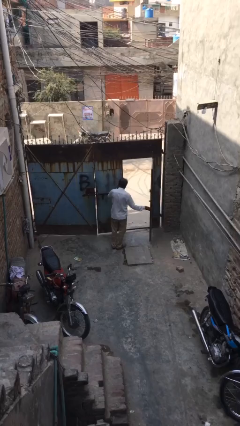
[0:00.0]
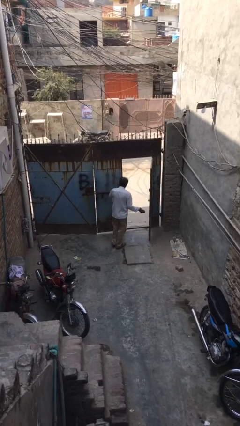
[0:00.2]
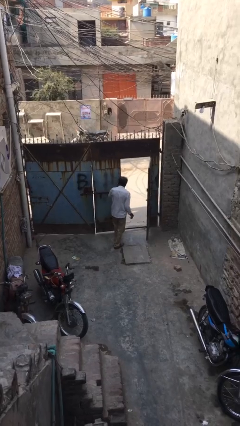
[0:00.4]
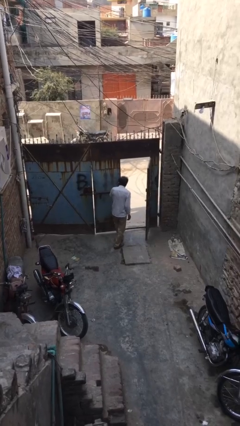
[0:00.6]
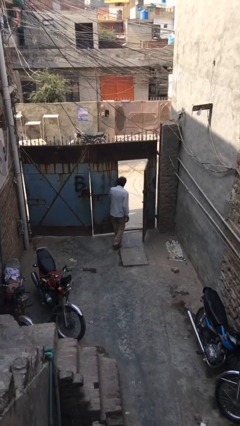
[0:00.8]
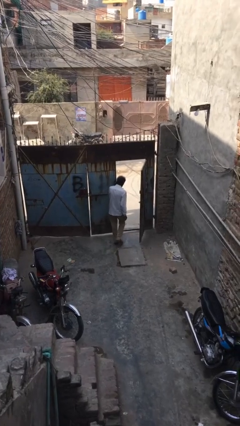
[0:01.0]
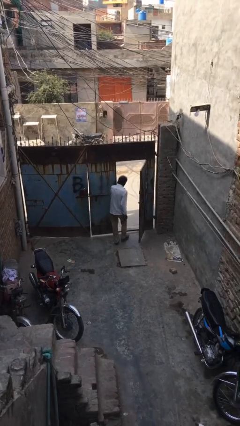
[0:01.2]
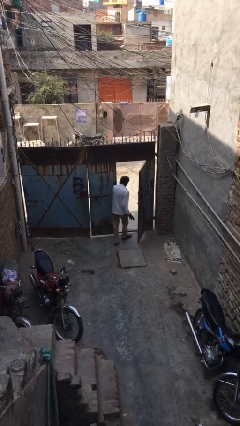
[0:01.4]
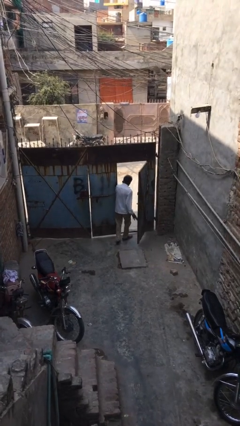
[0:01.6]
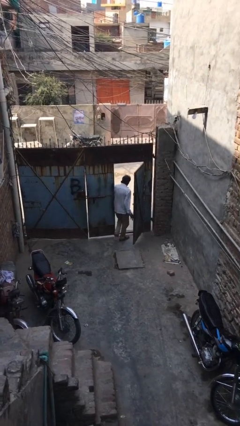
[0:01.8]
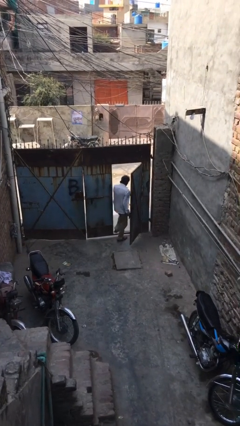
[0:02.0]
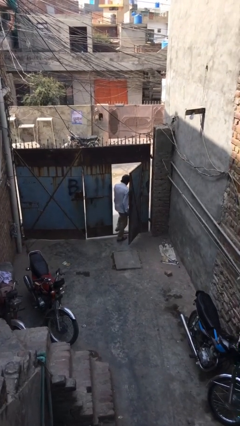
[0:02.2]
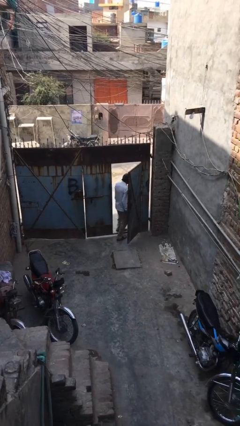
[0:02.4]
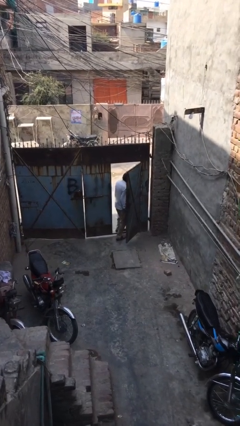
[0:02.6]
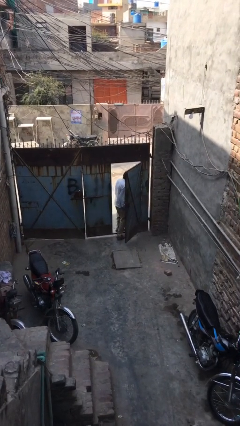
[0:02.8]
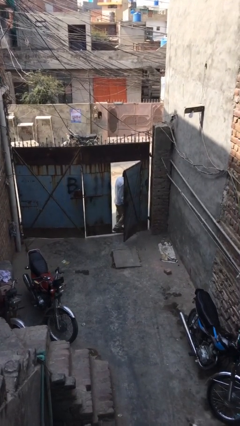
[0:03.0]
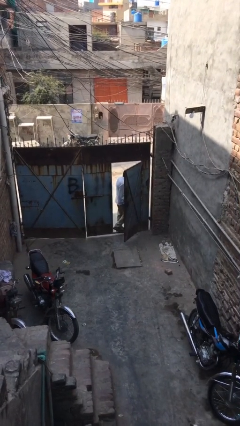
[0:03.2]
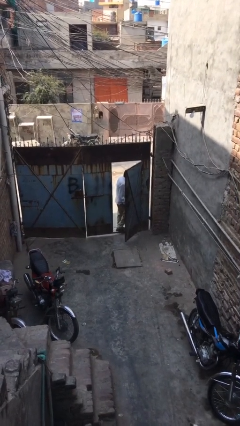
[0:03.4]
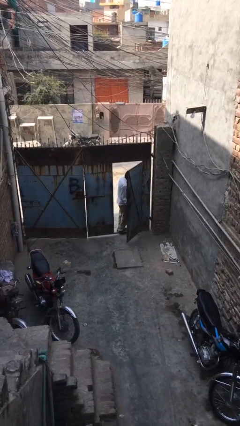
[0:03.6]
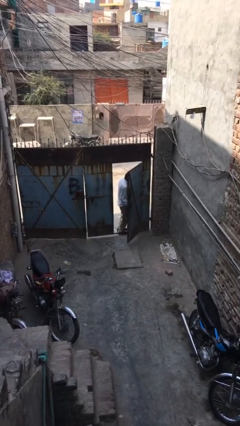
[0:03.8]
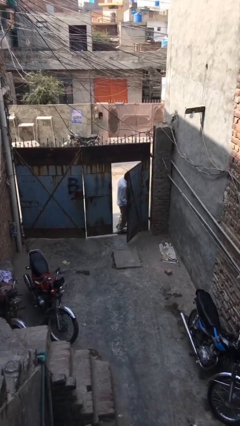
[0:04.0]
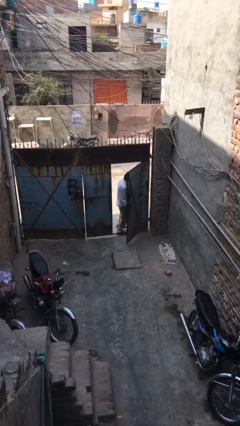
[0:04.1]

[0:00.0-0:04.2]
person exits scene through structure

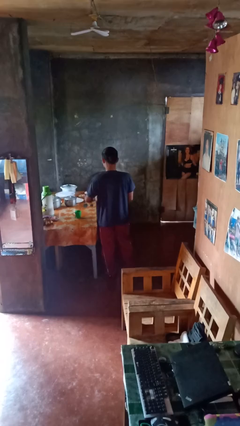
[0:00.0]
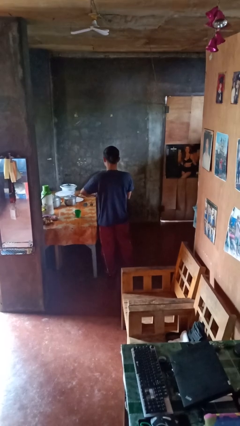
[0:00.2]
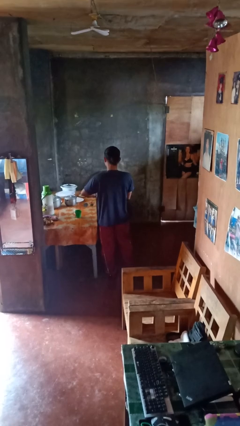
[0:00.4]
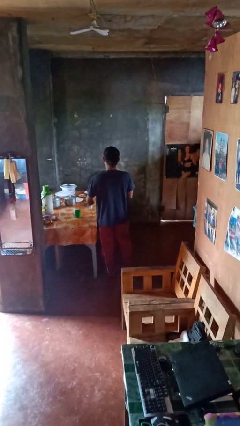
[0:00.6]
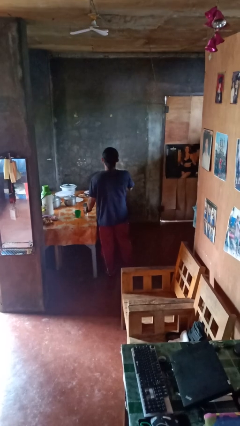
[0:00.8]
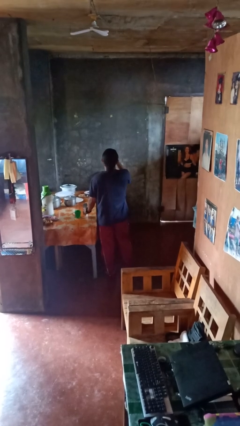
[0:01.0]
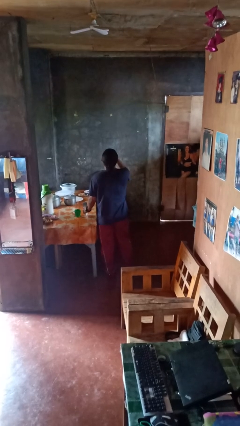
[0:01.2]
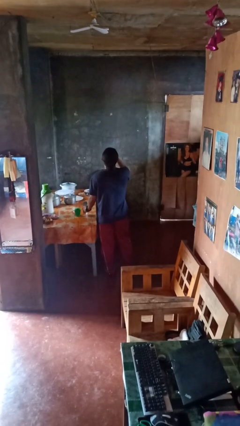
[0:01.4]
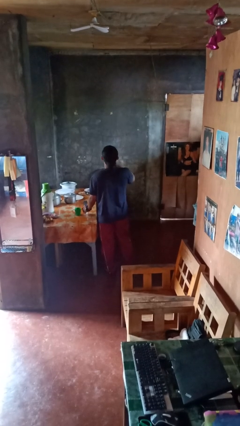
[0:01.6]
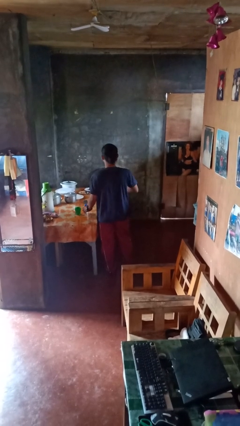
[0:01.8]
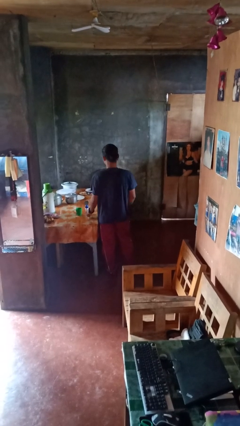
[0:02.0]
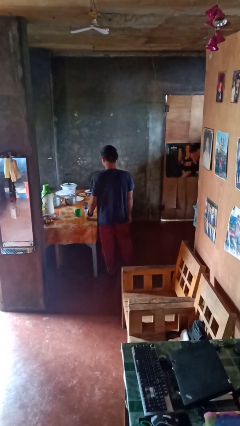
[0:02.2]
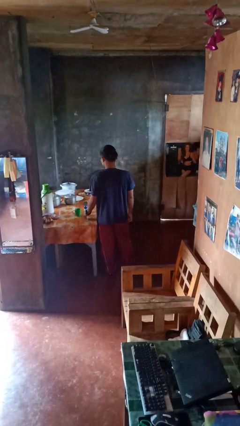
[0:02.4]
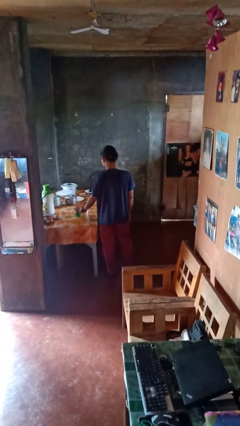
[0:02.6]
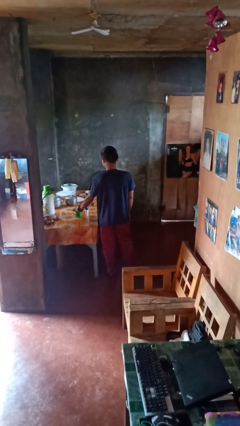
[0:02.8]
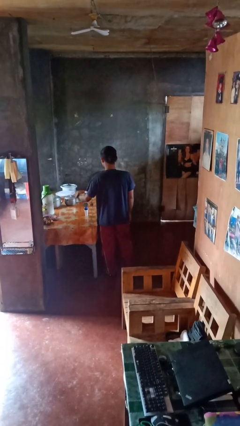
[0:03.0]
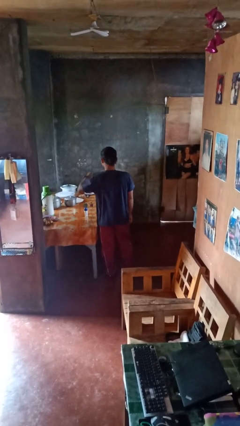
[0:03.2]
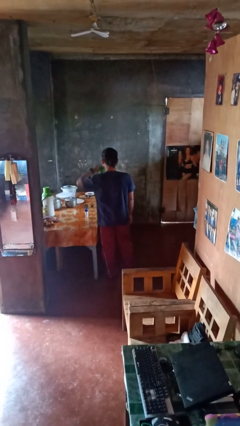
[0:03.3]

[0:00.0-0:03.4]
person takes medicine pills

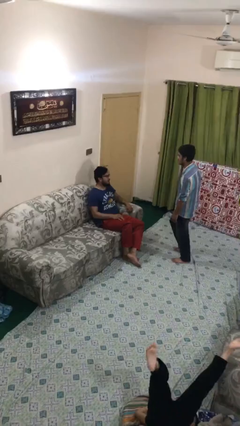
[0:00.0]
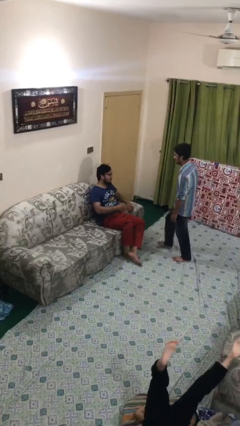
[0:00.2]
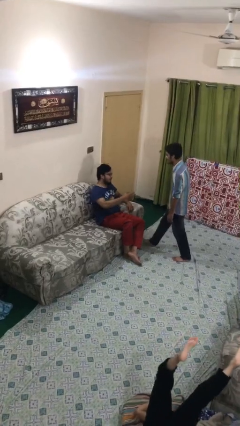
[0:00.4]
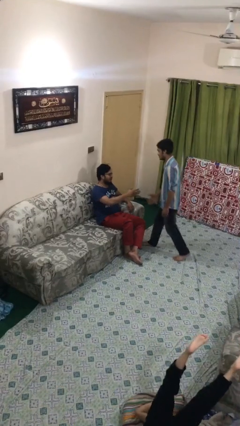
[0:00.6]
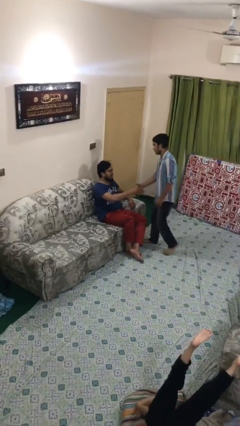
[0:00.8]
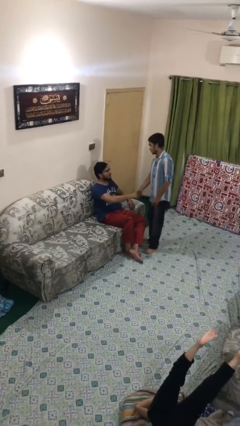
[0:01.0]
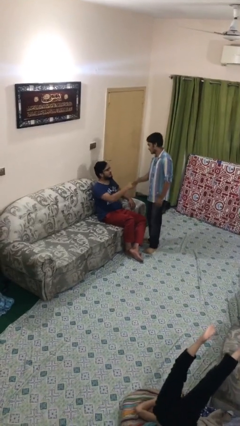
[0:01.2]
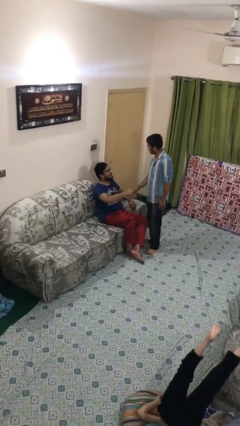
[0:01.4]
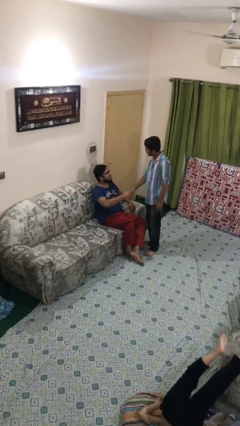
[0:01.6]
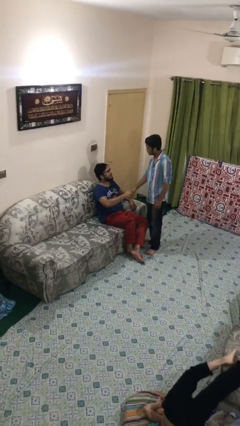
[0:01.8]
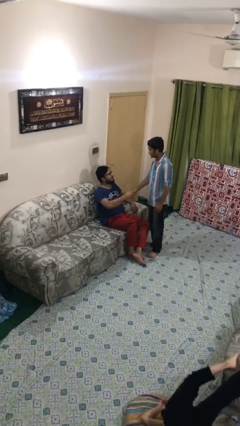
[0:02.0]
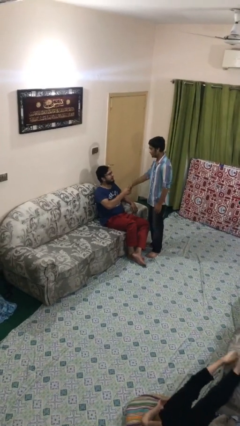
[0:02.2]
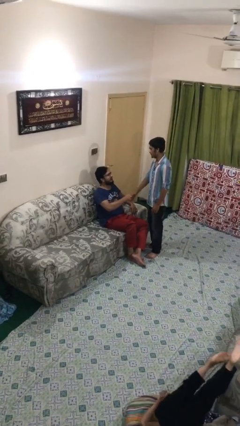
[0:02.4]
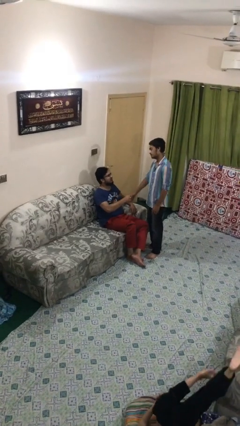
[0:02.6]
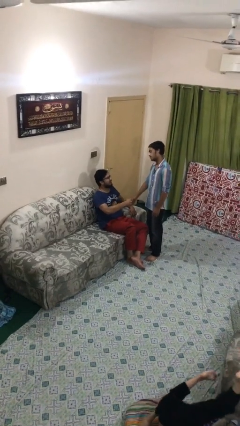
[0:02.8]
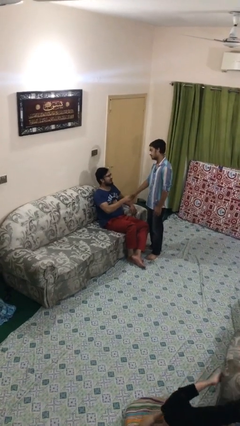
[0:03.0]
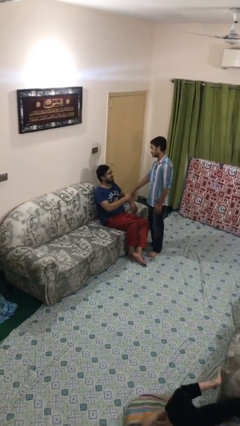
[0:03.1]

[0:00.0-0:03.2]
person shakes hand

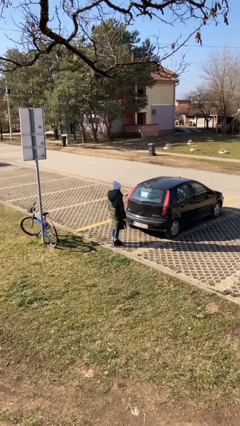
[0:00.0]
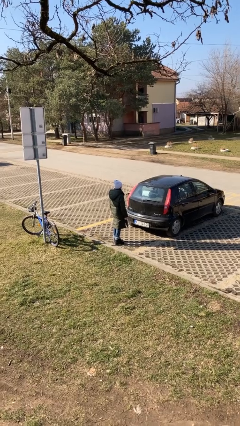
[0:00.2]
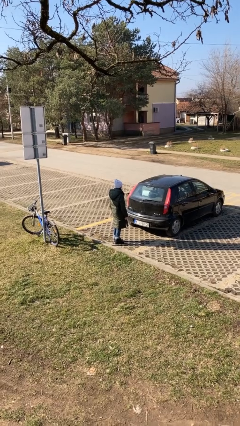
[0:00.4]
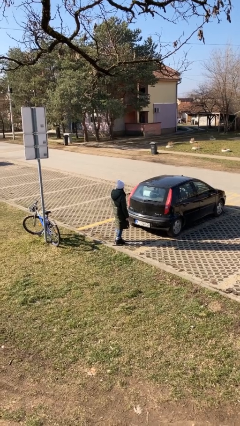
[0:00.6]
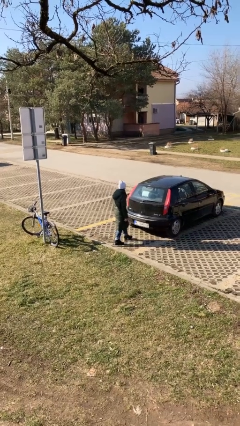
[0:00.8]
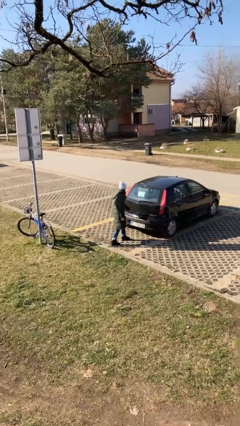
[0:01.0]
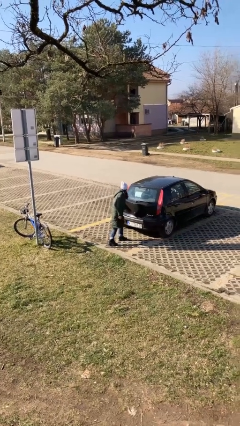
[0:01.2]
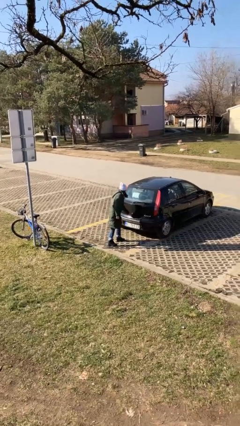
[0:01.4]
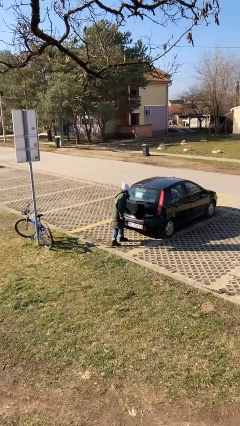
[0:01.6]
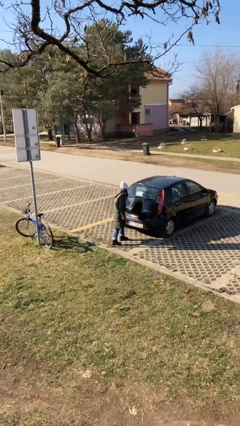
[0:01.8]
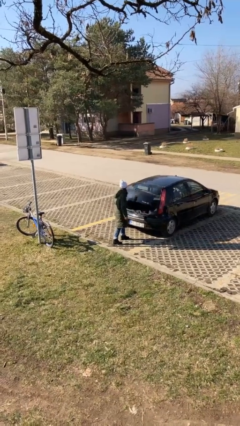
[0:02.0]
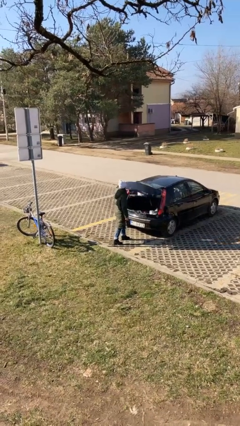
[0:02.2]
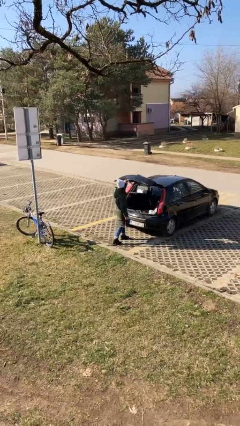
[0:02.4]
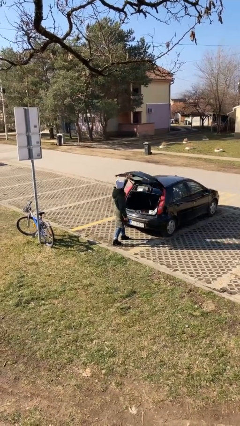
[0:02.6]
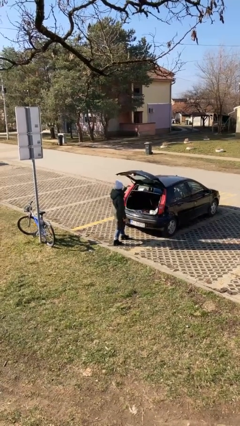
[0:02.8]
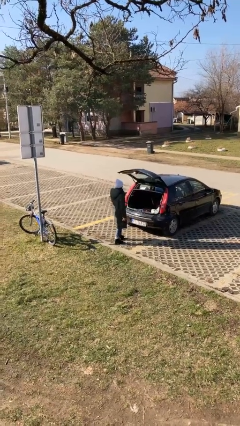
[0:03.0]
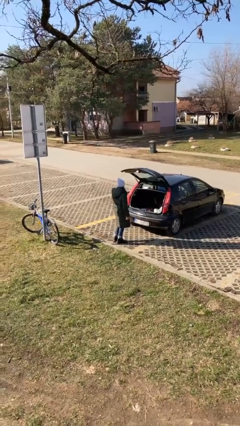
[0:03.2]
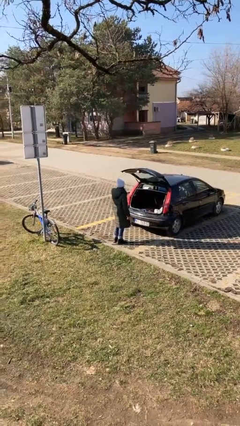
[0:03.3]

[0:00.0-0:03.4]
person opens car trunk

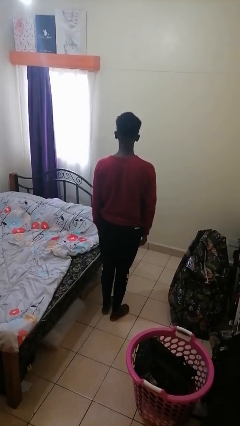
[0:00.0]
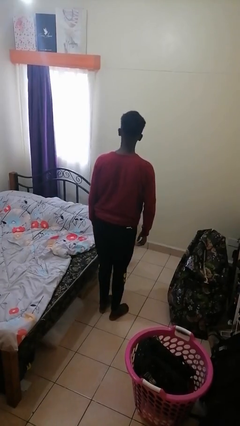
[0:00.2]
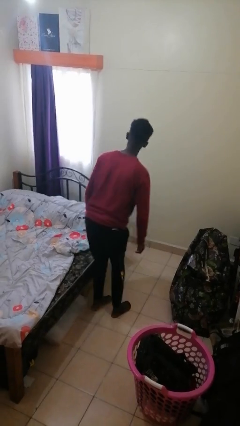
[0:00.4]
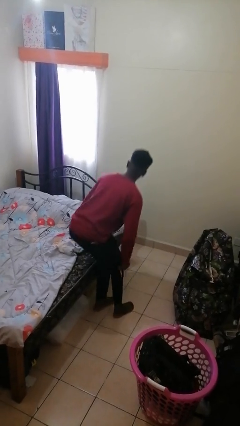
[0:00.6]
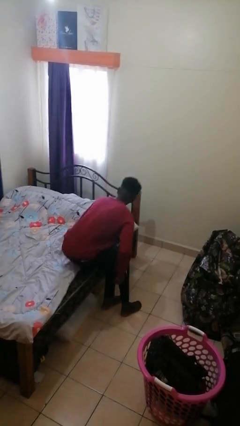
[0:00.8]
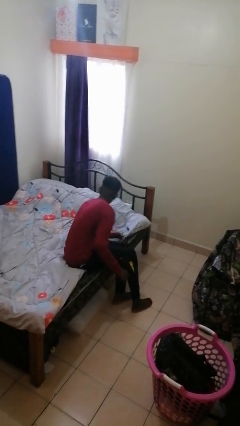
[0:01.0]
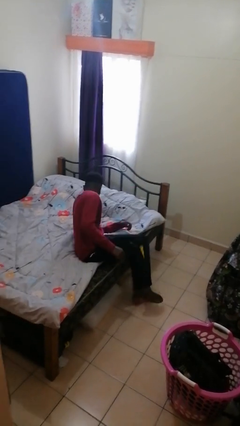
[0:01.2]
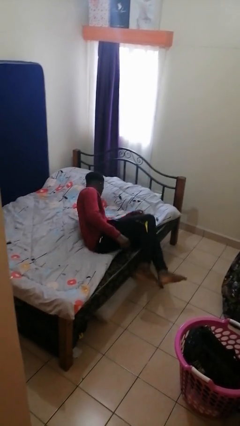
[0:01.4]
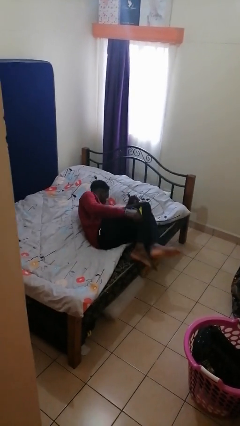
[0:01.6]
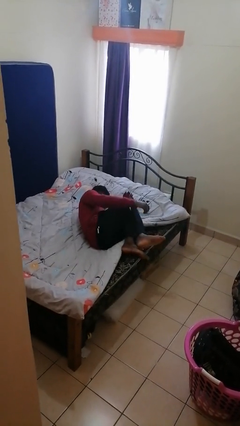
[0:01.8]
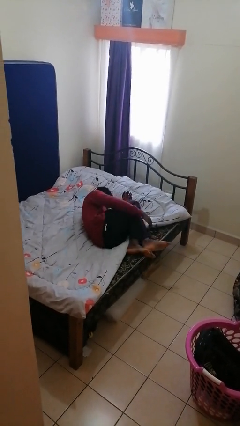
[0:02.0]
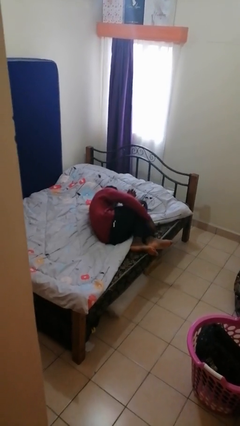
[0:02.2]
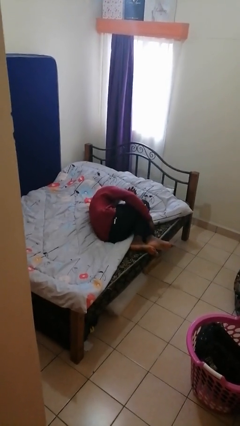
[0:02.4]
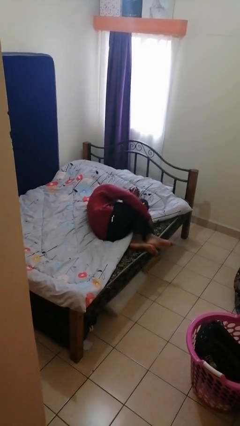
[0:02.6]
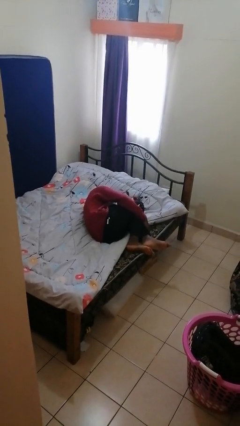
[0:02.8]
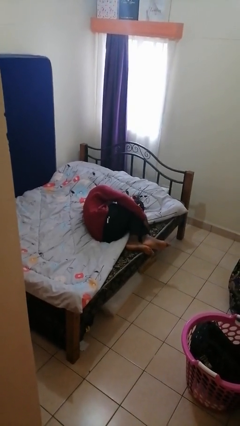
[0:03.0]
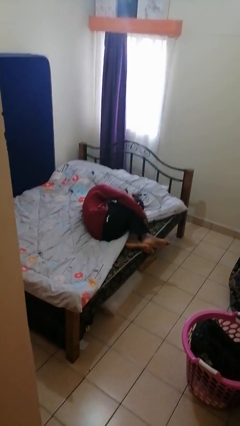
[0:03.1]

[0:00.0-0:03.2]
person lies down on bed
